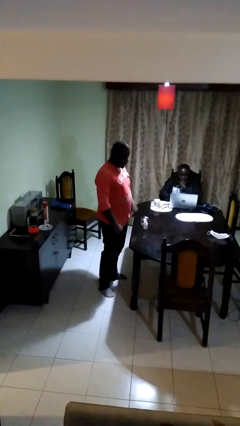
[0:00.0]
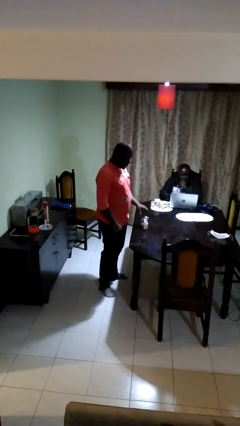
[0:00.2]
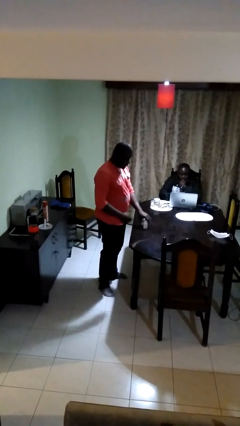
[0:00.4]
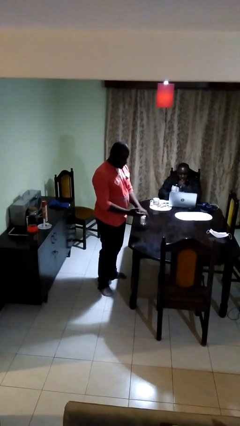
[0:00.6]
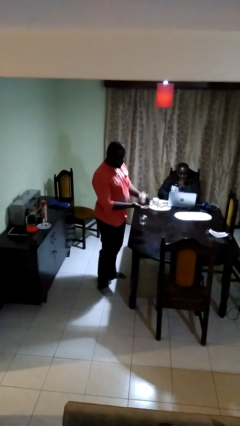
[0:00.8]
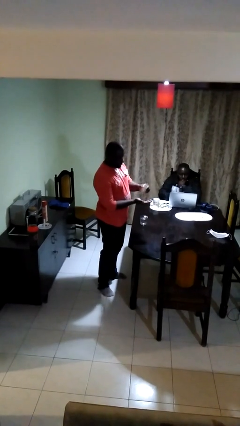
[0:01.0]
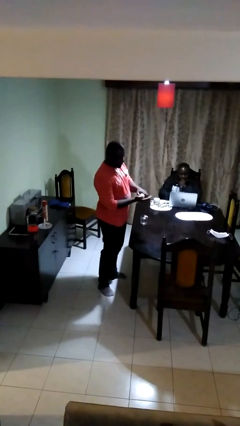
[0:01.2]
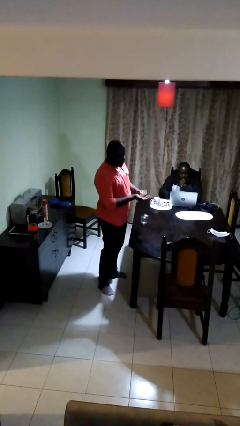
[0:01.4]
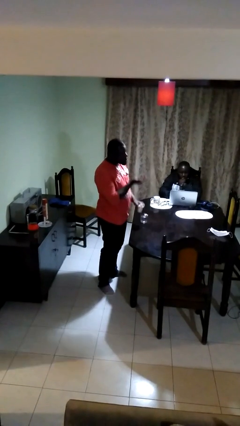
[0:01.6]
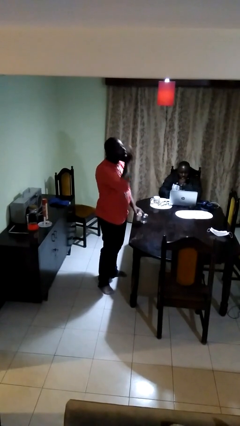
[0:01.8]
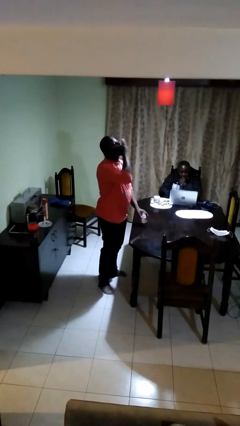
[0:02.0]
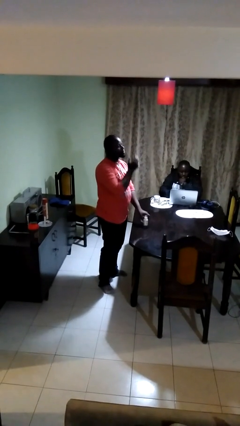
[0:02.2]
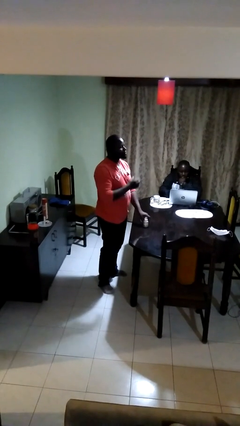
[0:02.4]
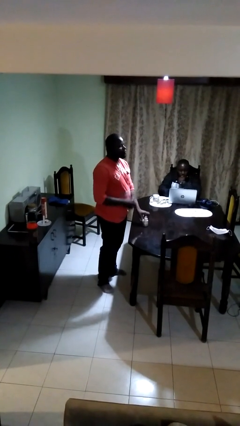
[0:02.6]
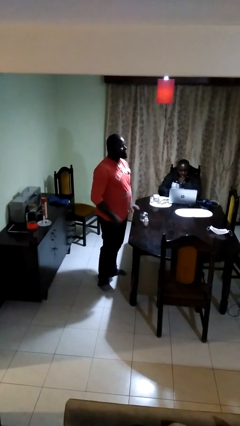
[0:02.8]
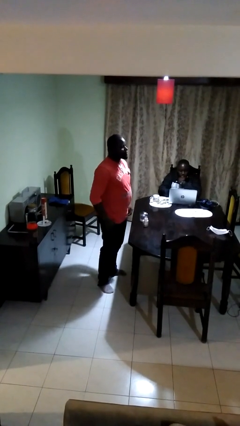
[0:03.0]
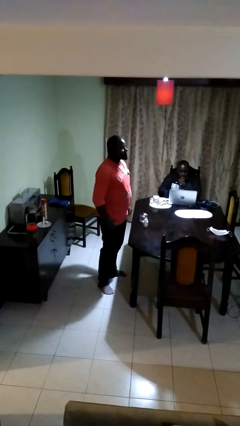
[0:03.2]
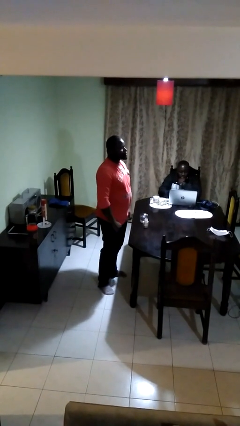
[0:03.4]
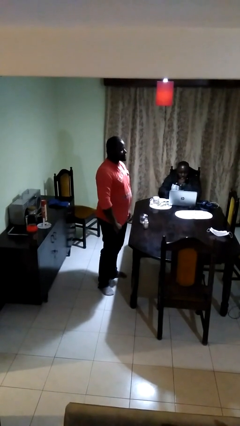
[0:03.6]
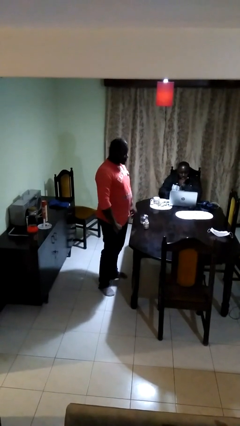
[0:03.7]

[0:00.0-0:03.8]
person takes medicine pills

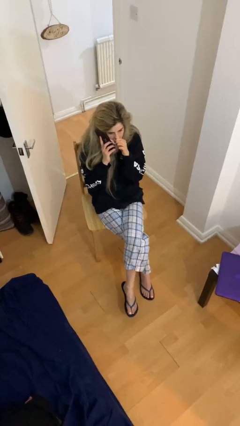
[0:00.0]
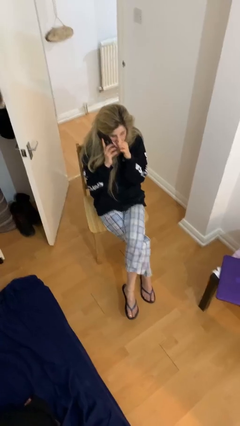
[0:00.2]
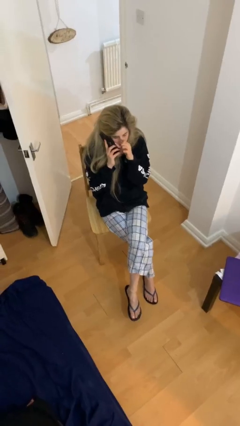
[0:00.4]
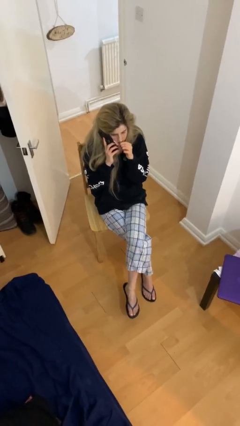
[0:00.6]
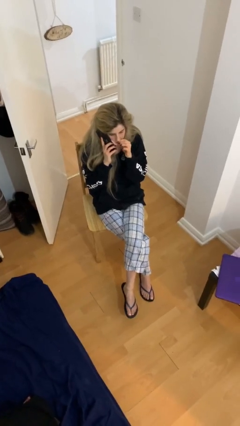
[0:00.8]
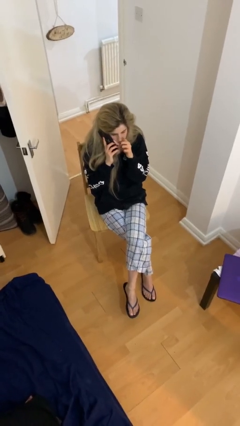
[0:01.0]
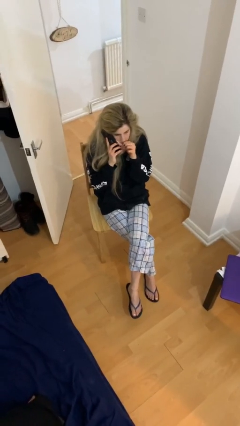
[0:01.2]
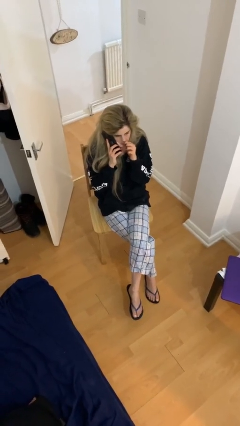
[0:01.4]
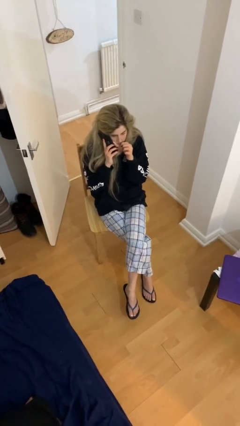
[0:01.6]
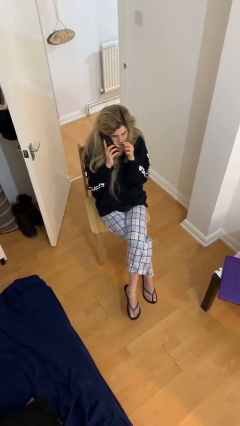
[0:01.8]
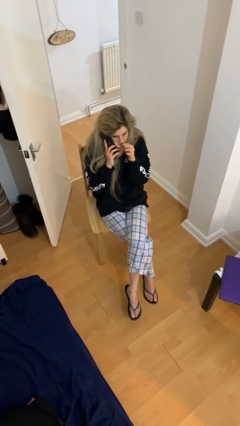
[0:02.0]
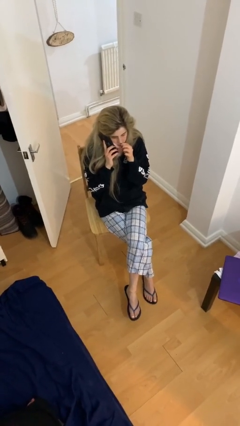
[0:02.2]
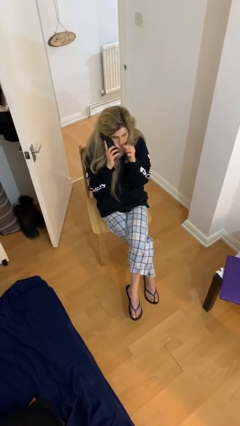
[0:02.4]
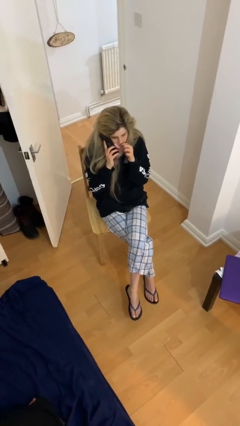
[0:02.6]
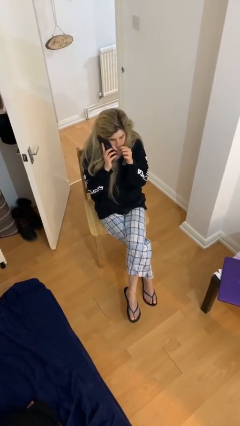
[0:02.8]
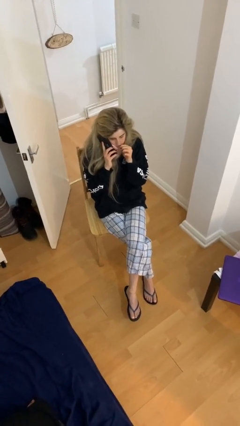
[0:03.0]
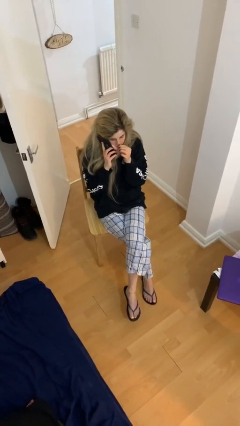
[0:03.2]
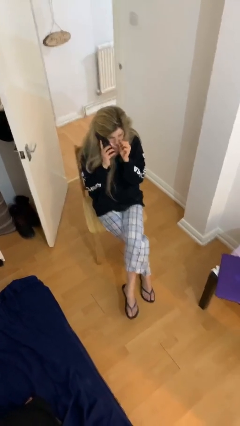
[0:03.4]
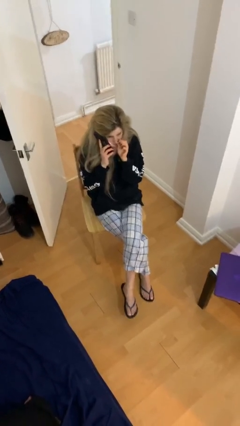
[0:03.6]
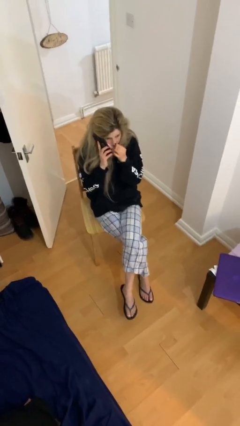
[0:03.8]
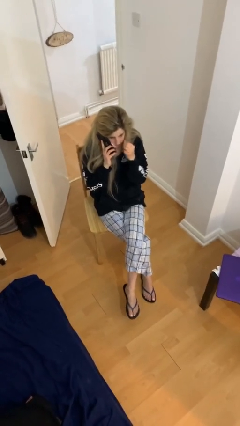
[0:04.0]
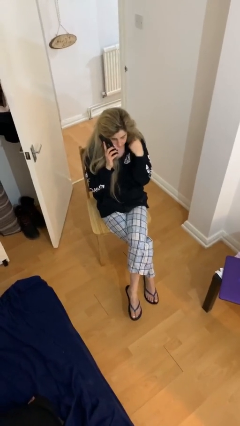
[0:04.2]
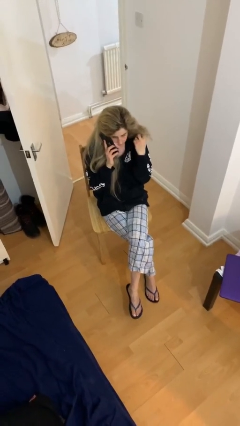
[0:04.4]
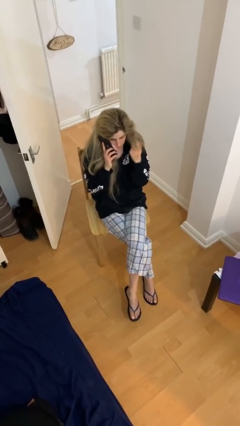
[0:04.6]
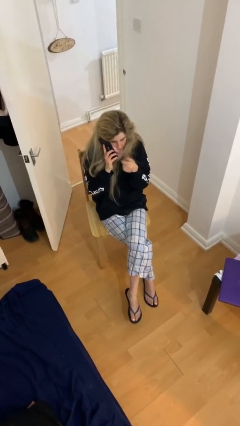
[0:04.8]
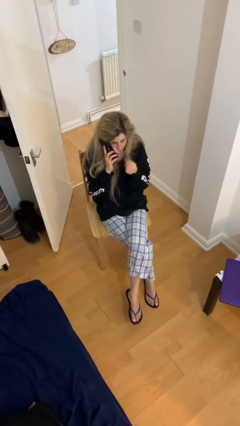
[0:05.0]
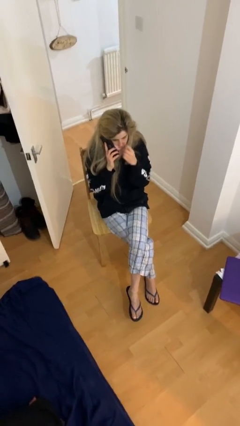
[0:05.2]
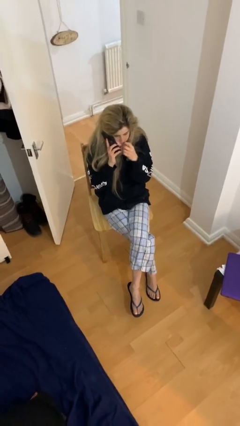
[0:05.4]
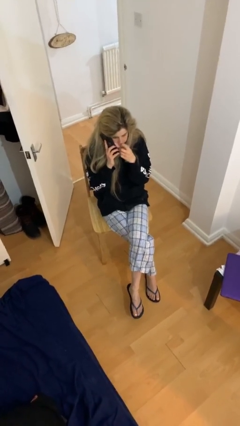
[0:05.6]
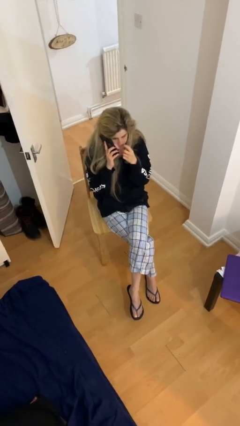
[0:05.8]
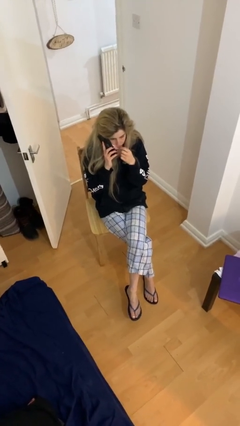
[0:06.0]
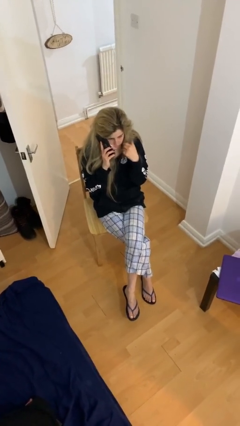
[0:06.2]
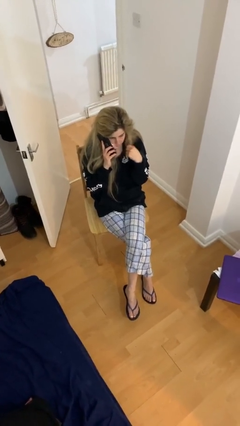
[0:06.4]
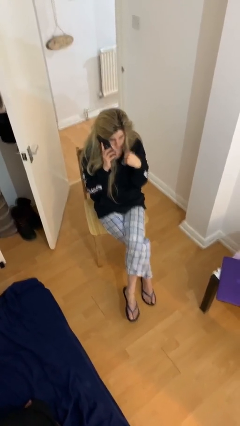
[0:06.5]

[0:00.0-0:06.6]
person talks on phone

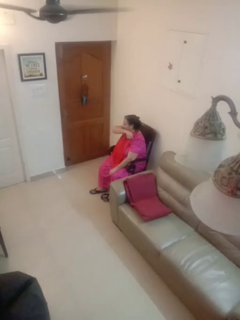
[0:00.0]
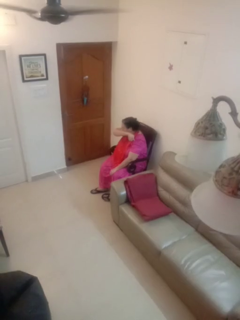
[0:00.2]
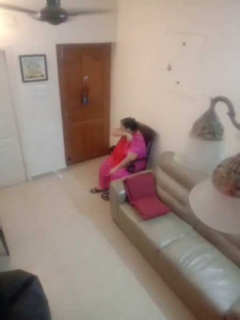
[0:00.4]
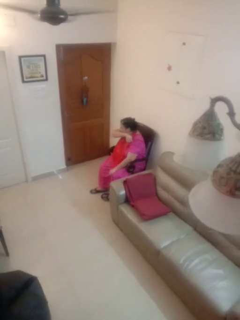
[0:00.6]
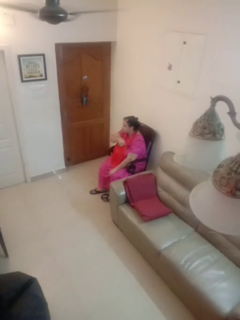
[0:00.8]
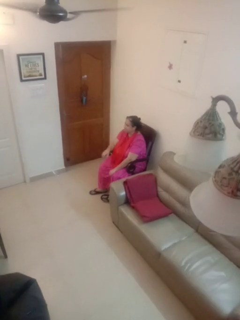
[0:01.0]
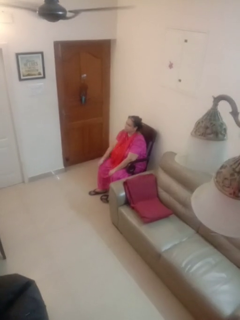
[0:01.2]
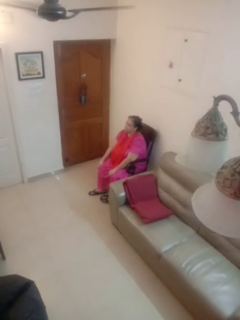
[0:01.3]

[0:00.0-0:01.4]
person sneezes into arm

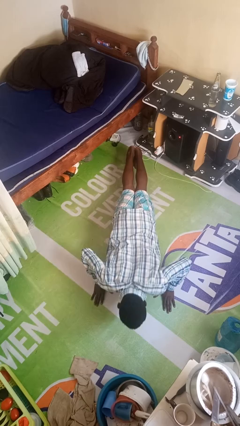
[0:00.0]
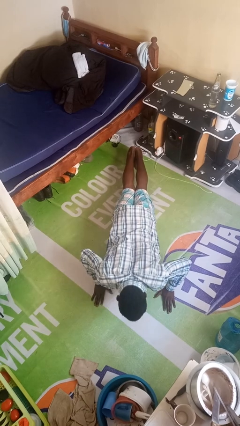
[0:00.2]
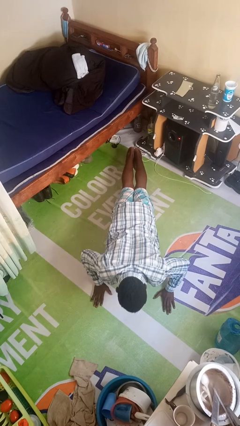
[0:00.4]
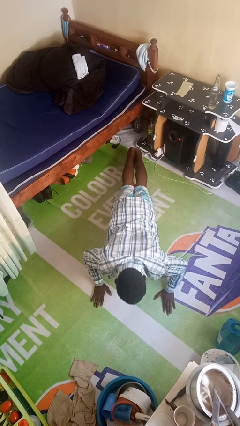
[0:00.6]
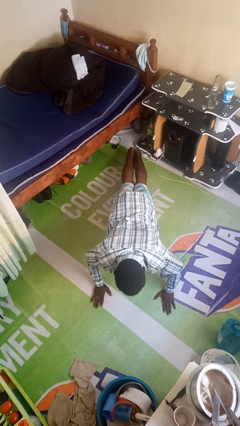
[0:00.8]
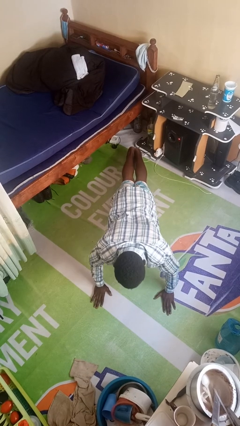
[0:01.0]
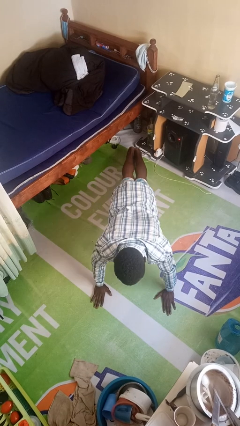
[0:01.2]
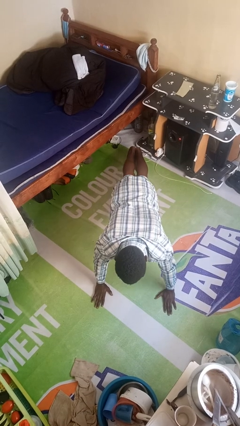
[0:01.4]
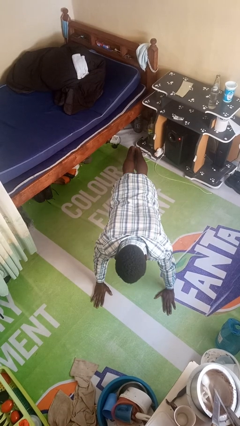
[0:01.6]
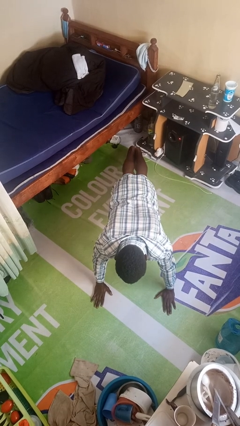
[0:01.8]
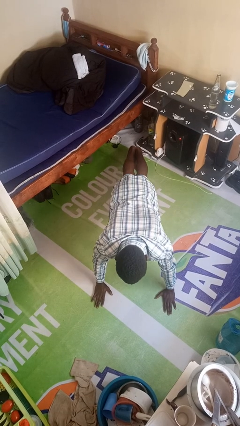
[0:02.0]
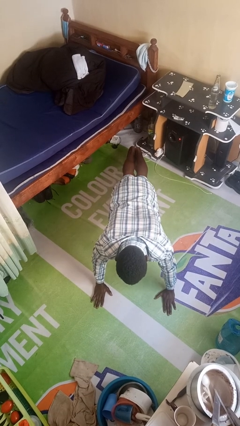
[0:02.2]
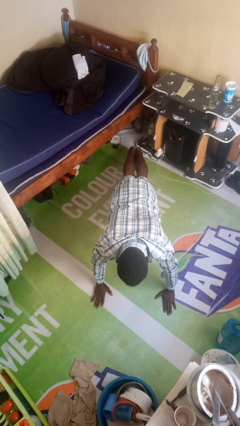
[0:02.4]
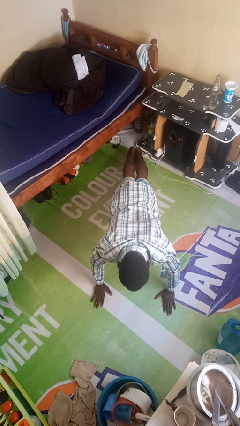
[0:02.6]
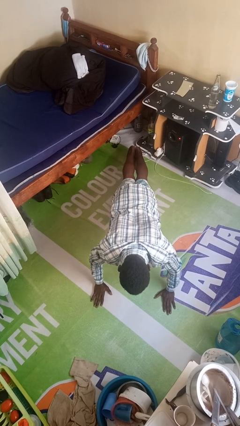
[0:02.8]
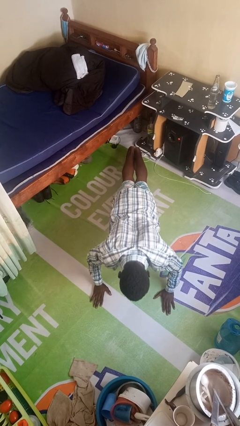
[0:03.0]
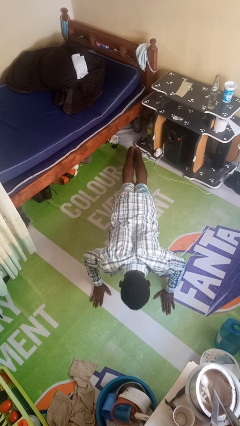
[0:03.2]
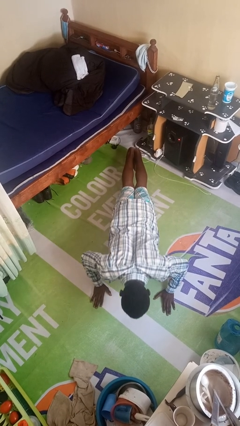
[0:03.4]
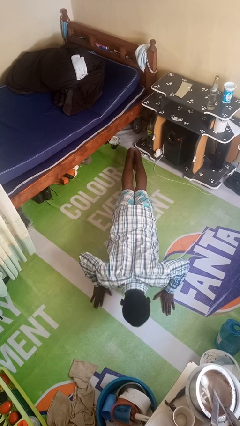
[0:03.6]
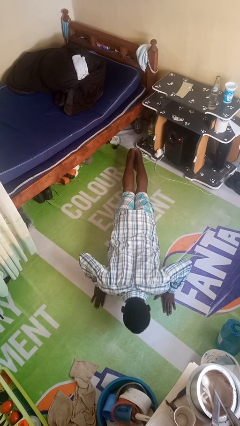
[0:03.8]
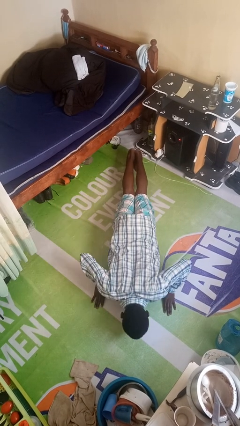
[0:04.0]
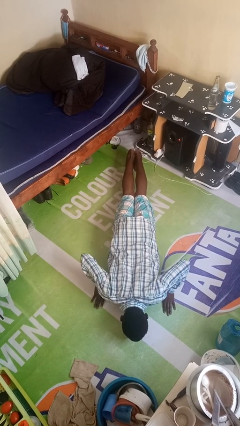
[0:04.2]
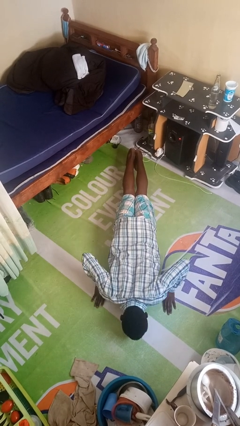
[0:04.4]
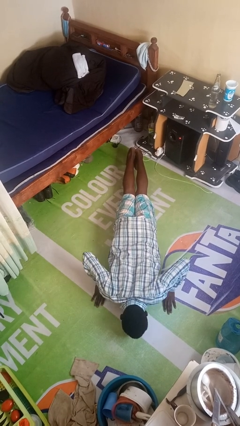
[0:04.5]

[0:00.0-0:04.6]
person exercises with pushup

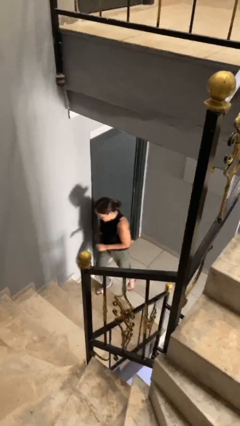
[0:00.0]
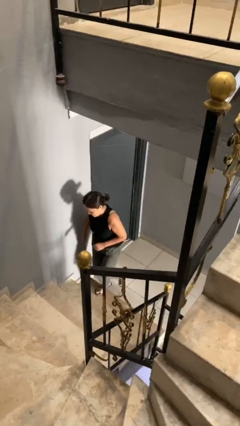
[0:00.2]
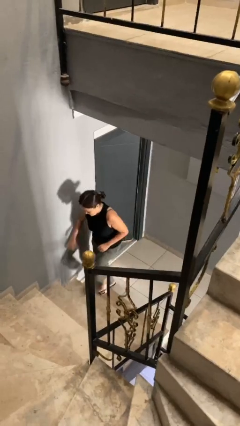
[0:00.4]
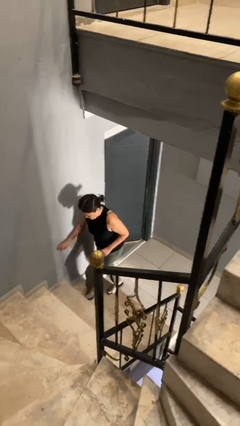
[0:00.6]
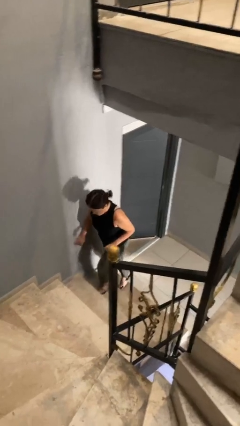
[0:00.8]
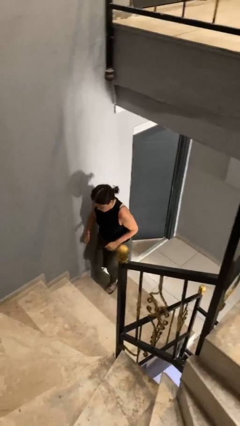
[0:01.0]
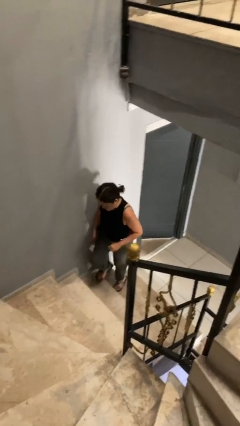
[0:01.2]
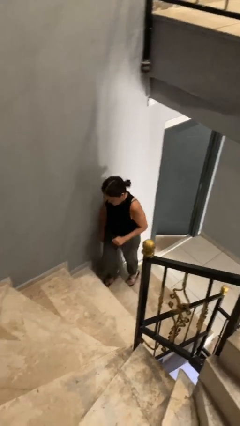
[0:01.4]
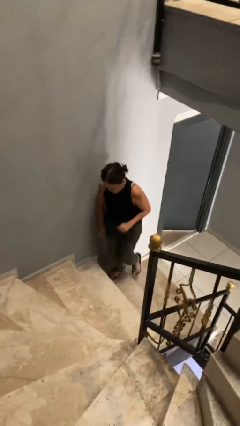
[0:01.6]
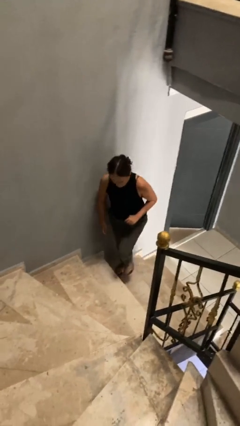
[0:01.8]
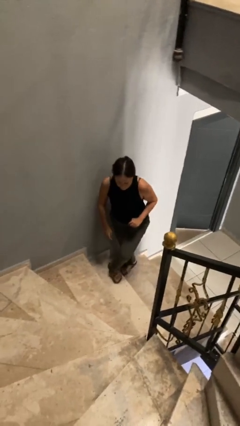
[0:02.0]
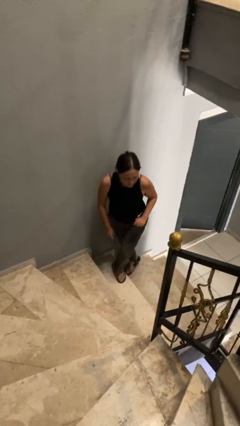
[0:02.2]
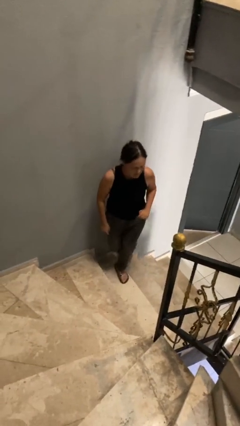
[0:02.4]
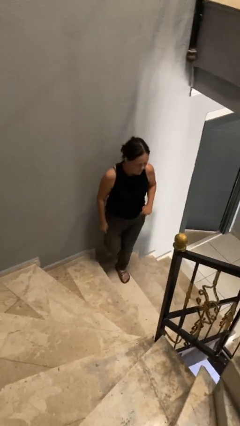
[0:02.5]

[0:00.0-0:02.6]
person climbs up stairs
